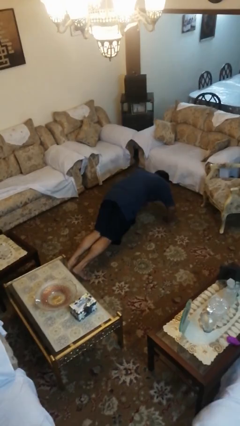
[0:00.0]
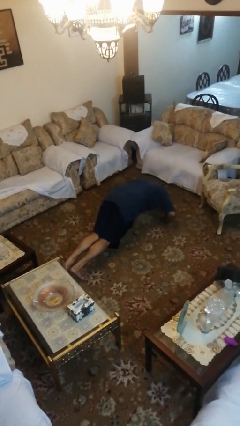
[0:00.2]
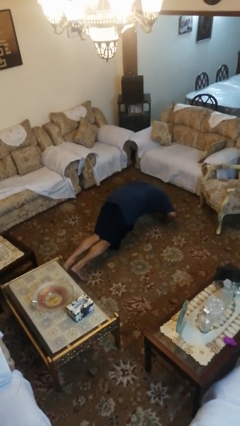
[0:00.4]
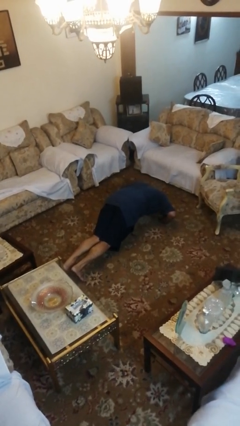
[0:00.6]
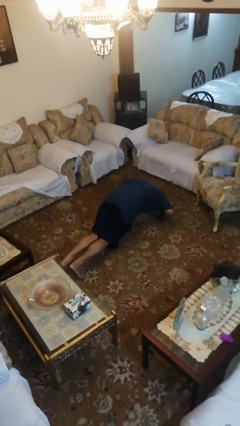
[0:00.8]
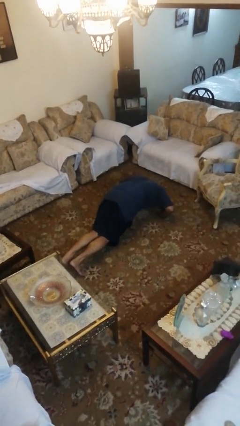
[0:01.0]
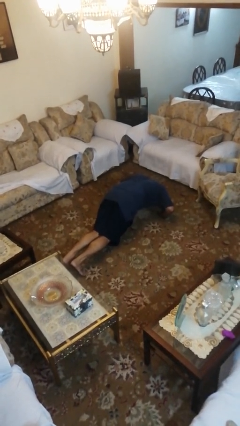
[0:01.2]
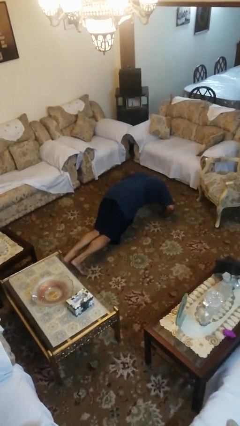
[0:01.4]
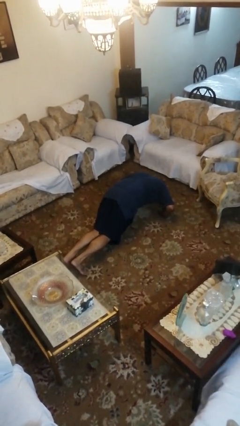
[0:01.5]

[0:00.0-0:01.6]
person exercises with pushup

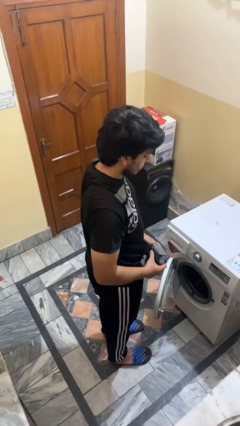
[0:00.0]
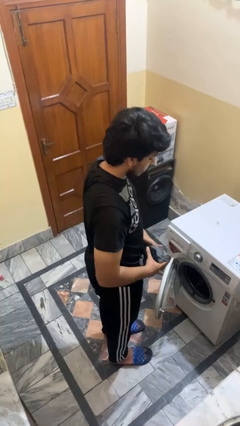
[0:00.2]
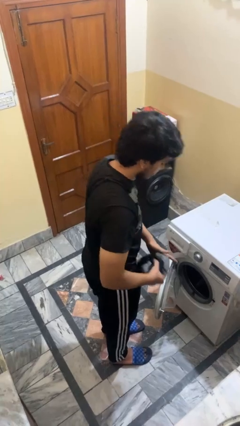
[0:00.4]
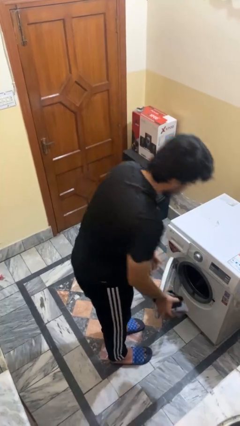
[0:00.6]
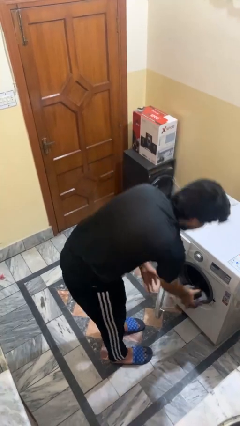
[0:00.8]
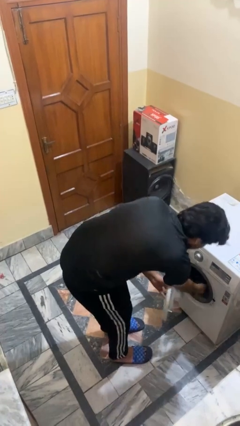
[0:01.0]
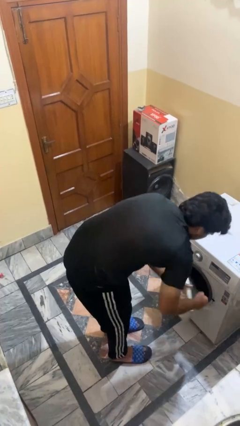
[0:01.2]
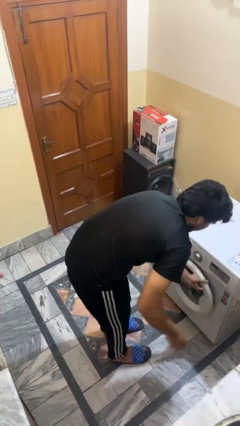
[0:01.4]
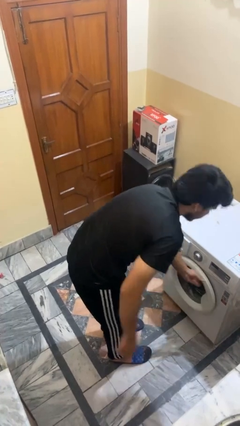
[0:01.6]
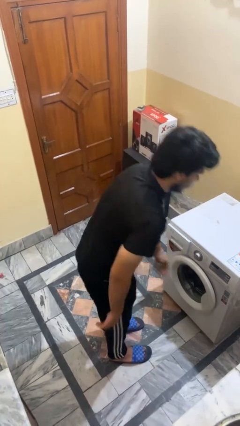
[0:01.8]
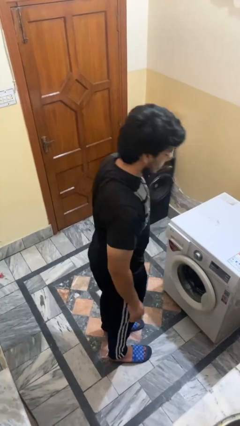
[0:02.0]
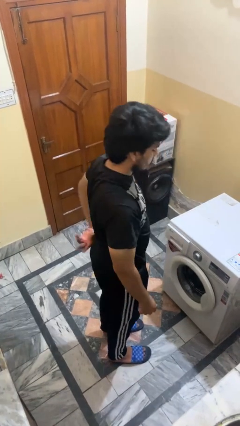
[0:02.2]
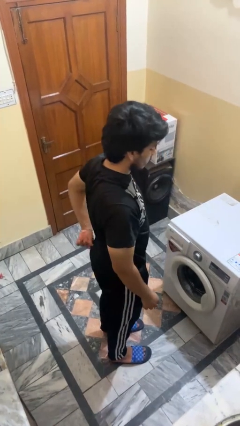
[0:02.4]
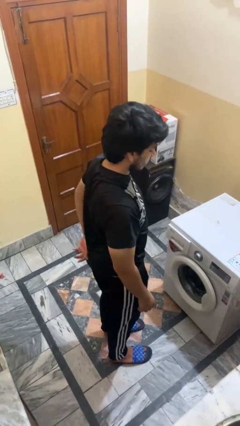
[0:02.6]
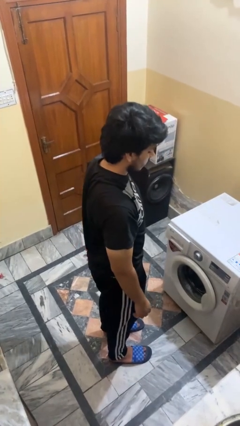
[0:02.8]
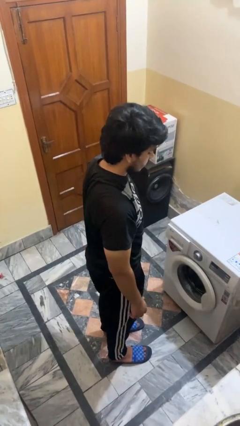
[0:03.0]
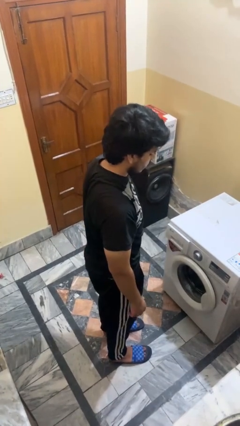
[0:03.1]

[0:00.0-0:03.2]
person loads dryer

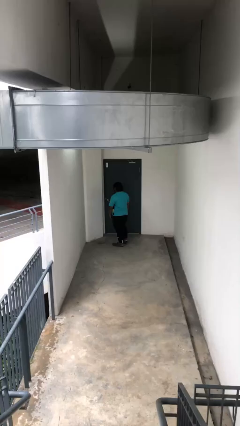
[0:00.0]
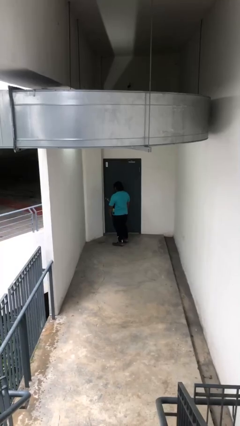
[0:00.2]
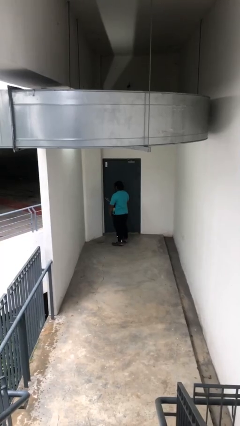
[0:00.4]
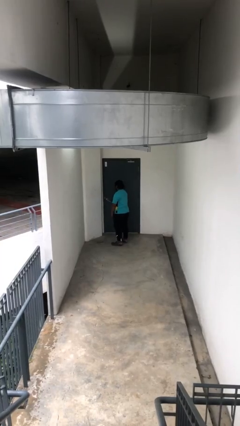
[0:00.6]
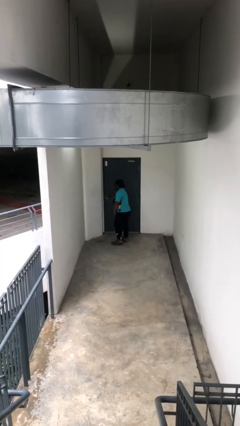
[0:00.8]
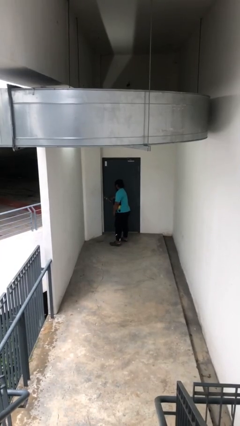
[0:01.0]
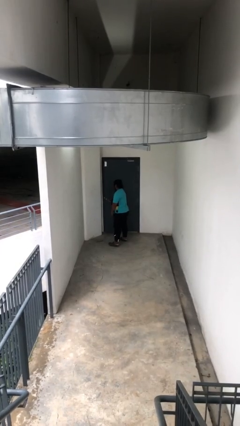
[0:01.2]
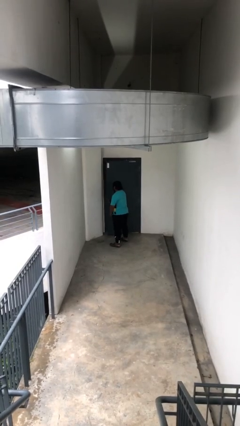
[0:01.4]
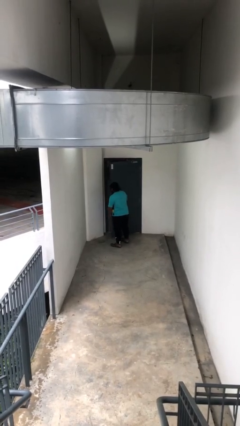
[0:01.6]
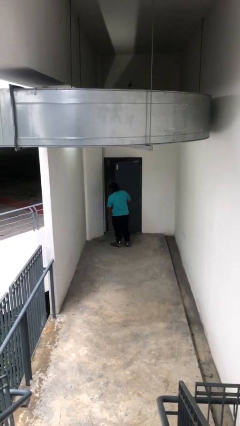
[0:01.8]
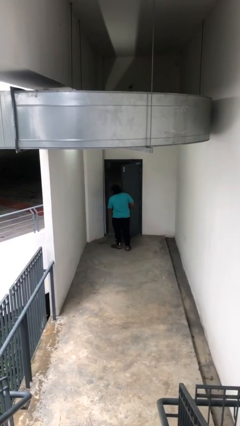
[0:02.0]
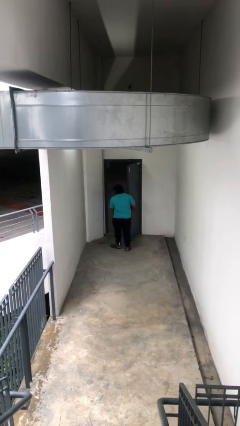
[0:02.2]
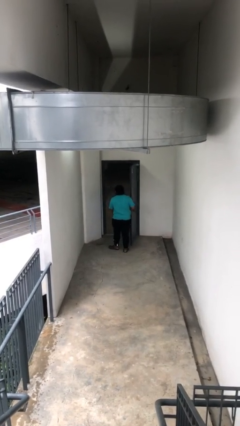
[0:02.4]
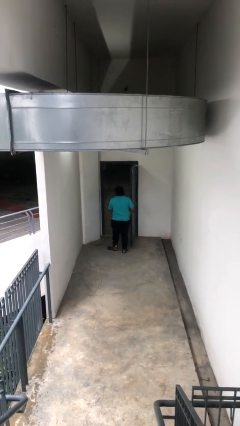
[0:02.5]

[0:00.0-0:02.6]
person opens facility door

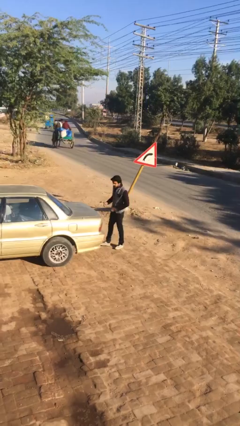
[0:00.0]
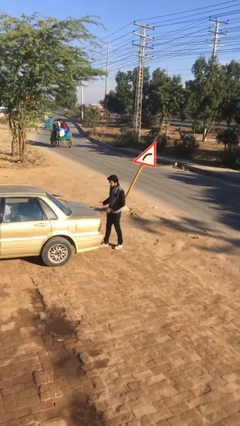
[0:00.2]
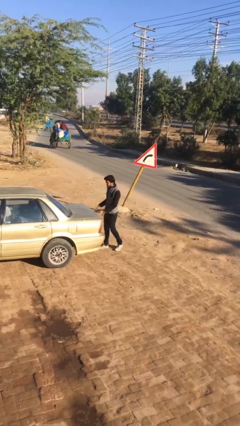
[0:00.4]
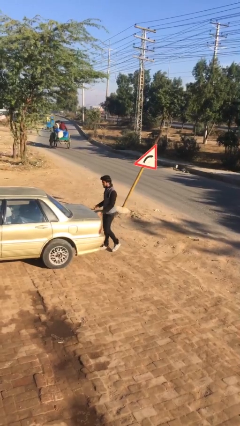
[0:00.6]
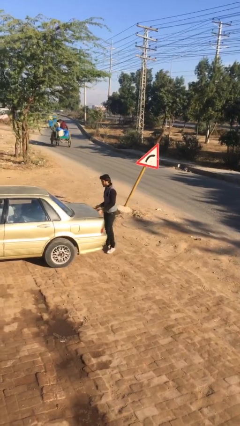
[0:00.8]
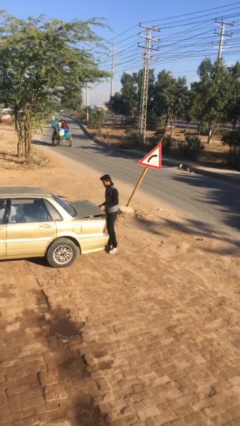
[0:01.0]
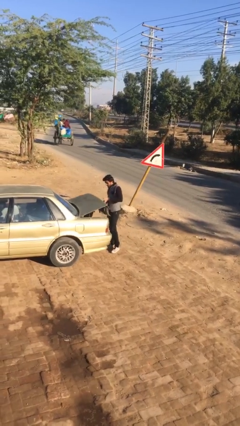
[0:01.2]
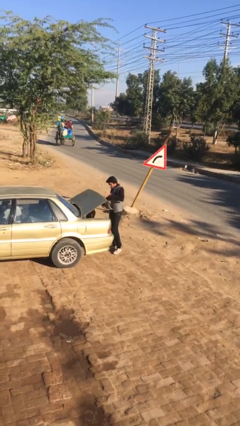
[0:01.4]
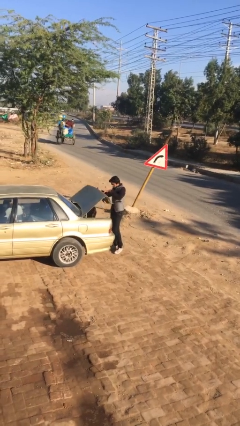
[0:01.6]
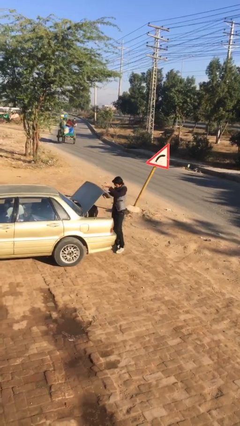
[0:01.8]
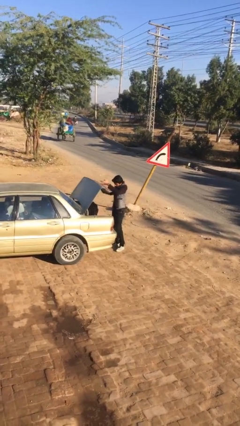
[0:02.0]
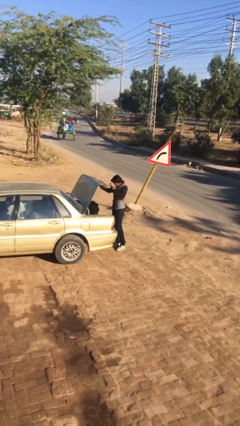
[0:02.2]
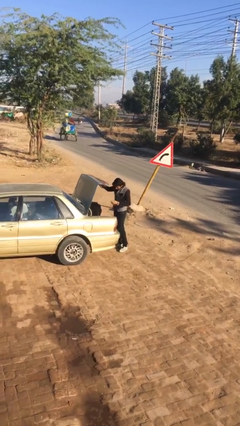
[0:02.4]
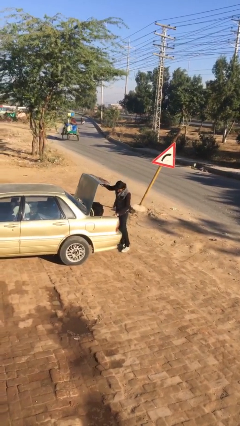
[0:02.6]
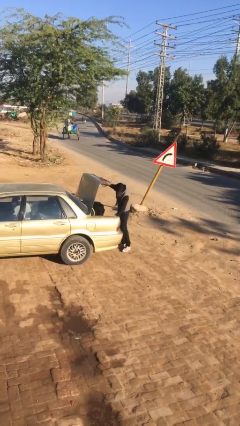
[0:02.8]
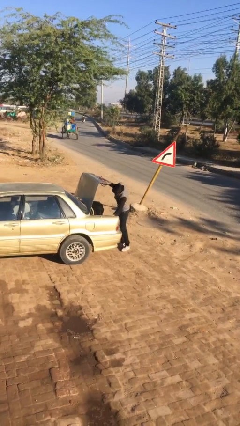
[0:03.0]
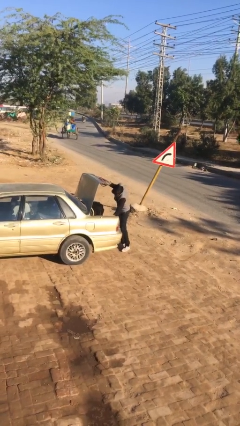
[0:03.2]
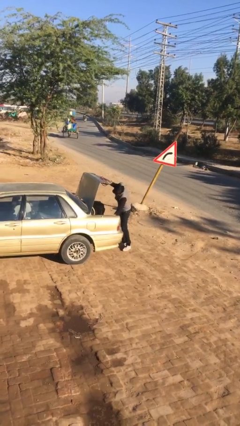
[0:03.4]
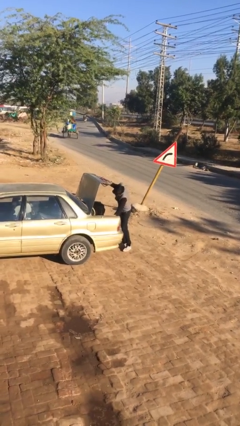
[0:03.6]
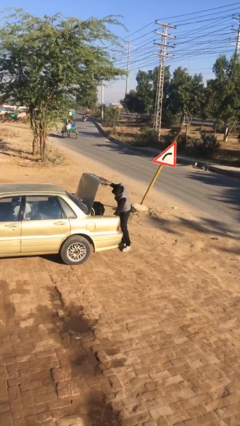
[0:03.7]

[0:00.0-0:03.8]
person opens car trunk

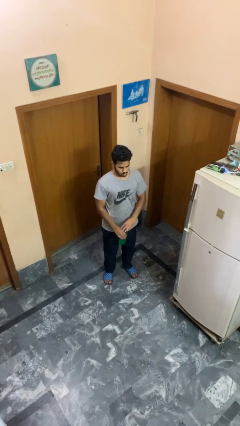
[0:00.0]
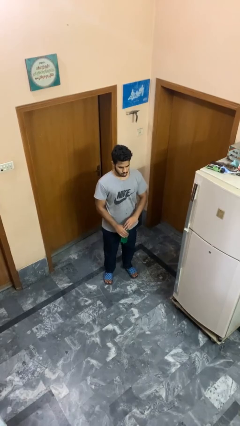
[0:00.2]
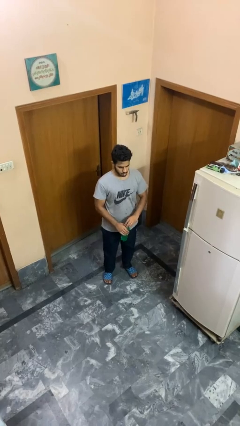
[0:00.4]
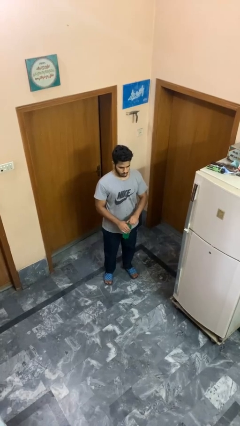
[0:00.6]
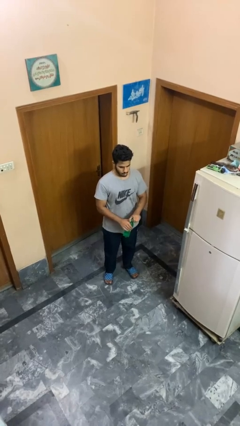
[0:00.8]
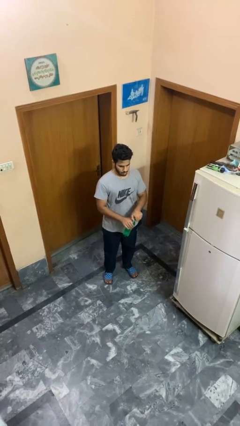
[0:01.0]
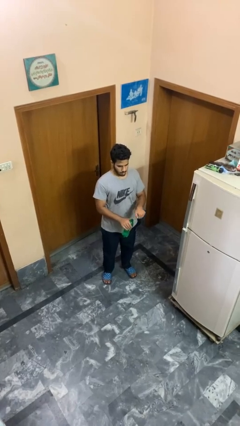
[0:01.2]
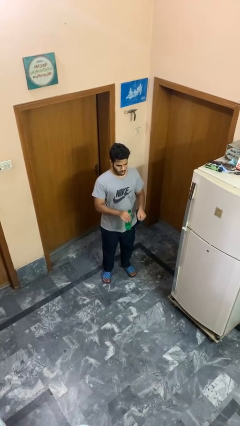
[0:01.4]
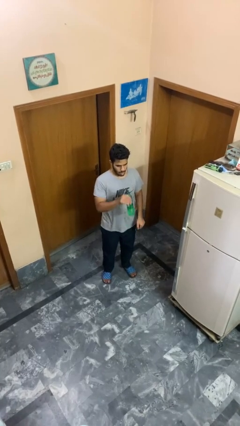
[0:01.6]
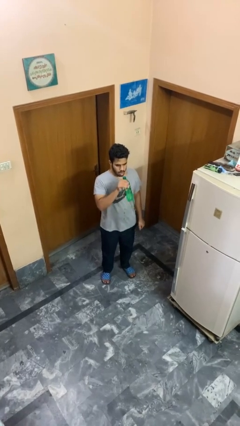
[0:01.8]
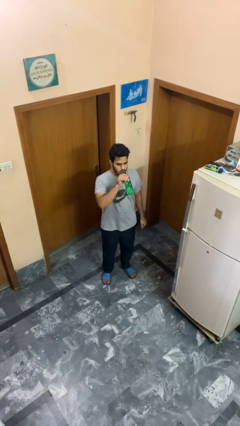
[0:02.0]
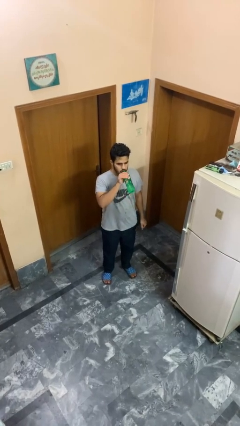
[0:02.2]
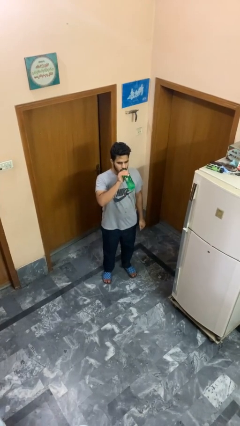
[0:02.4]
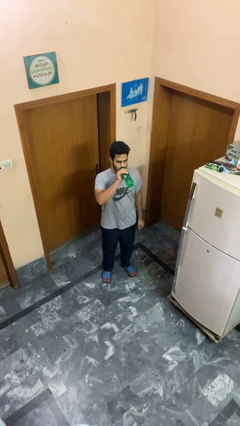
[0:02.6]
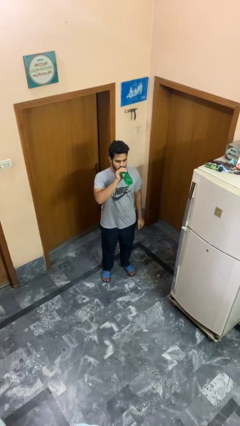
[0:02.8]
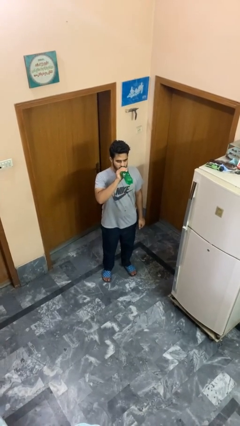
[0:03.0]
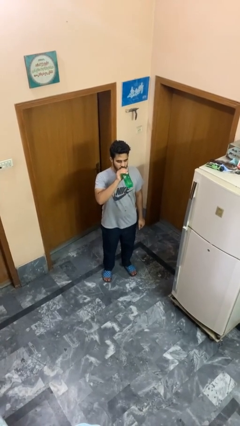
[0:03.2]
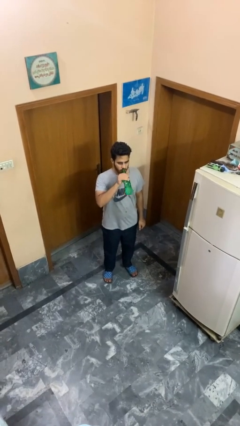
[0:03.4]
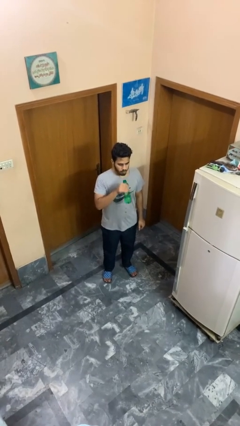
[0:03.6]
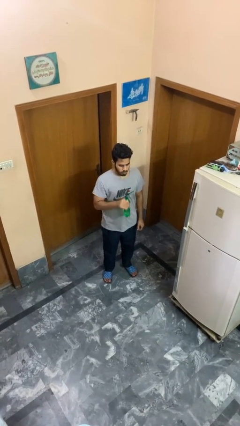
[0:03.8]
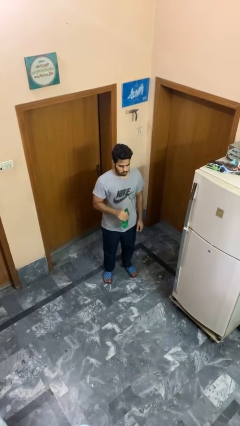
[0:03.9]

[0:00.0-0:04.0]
person drinks from bottle

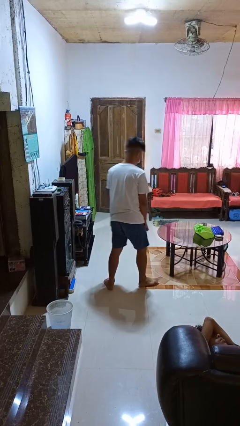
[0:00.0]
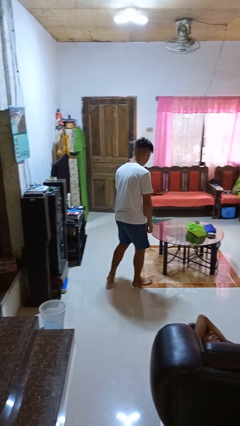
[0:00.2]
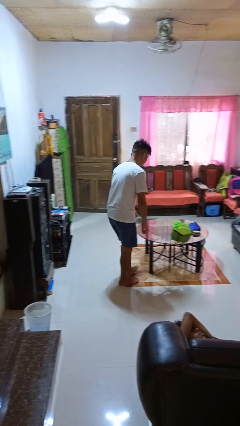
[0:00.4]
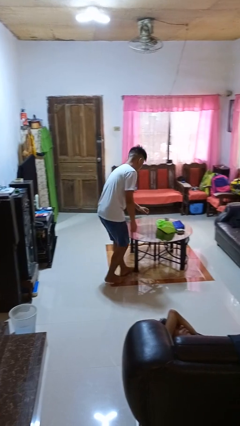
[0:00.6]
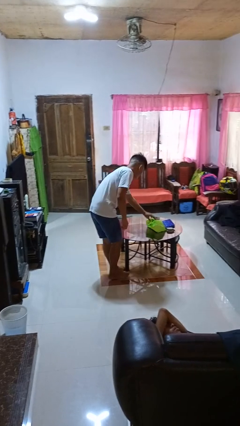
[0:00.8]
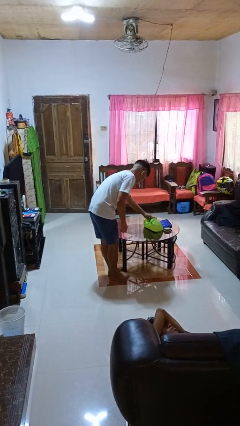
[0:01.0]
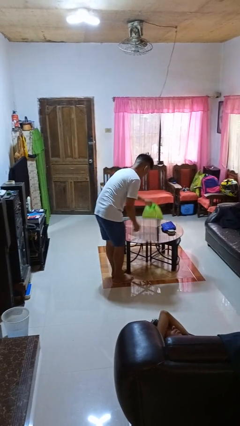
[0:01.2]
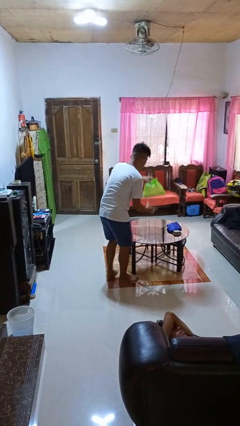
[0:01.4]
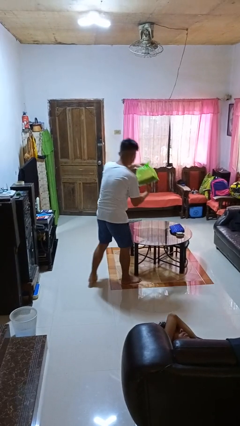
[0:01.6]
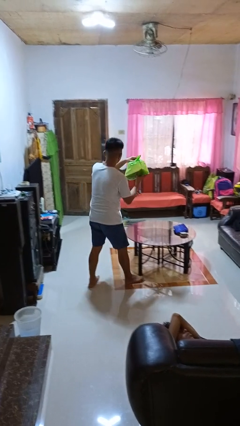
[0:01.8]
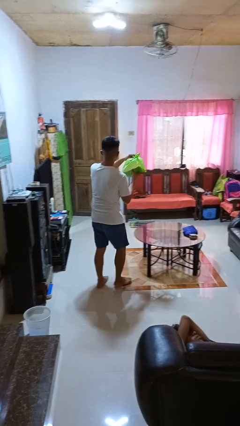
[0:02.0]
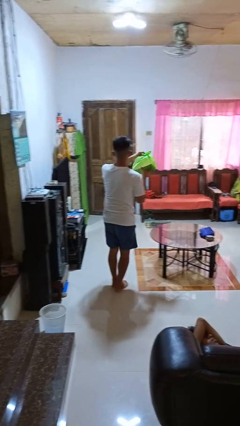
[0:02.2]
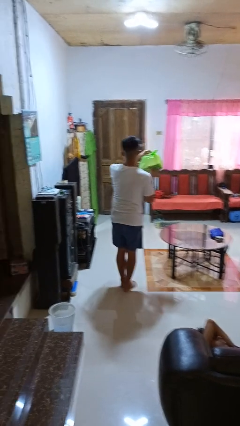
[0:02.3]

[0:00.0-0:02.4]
person picks up object from table
